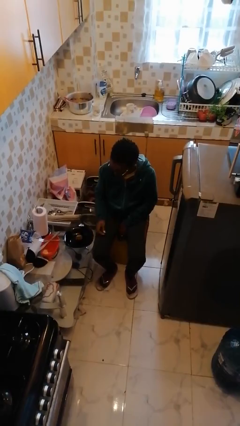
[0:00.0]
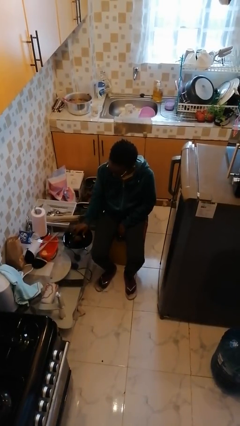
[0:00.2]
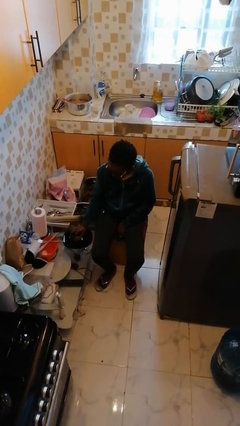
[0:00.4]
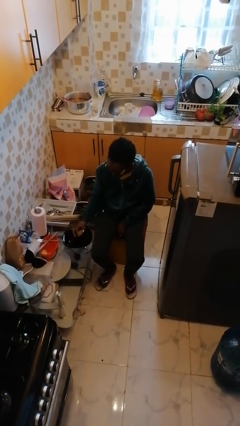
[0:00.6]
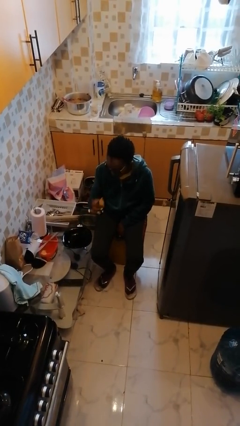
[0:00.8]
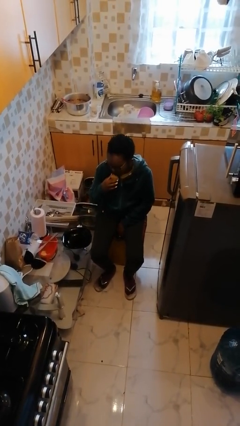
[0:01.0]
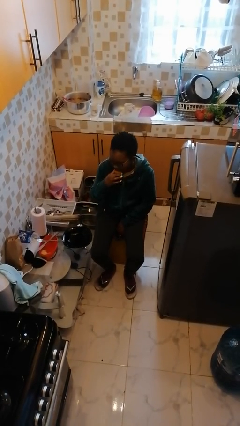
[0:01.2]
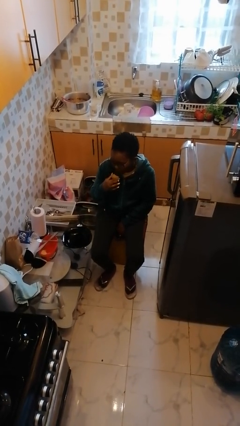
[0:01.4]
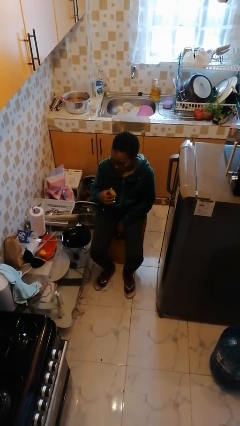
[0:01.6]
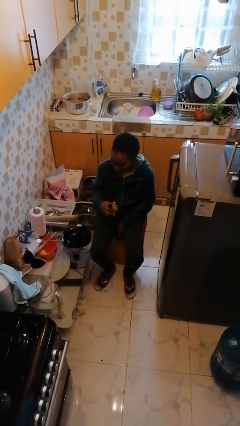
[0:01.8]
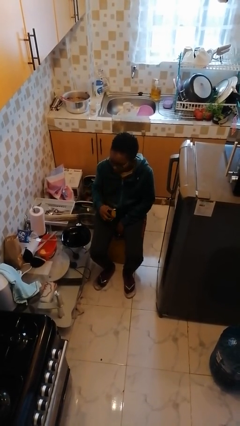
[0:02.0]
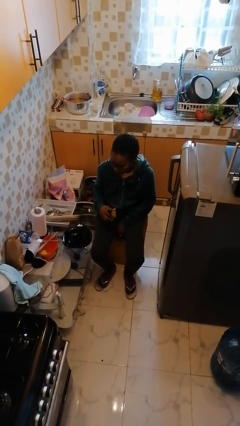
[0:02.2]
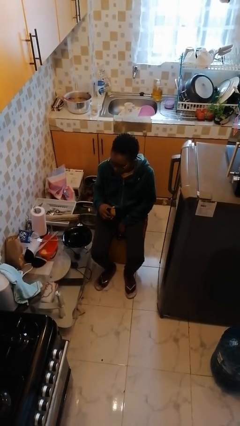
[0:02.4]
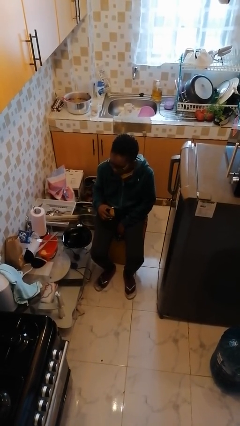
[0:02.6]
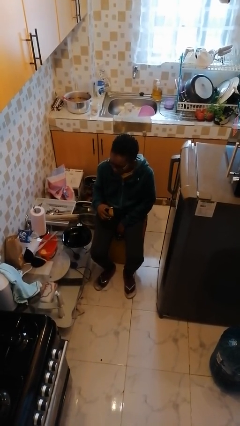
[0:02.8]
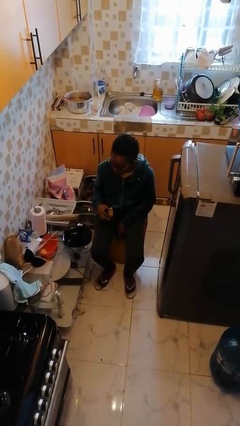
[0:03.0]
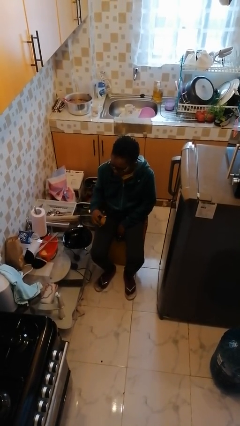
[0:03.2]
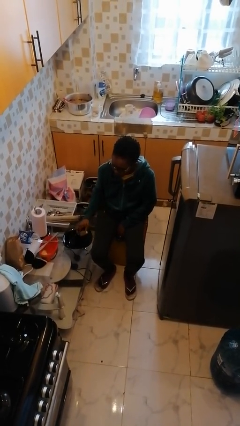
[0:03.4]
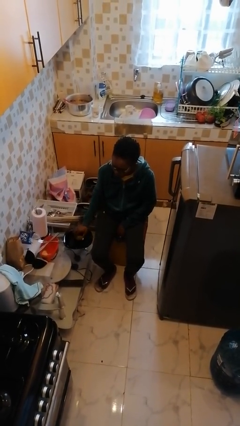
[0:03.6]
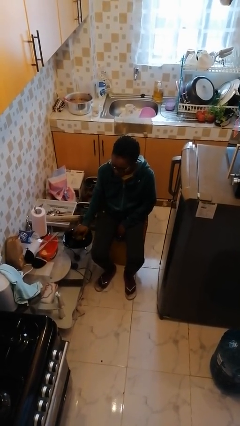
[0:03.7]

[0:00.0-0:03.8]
person eats with hands

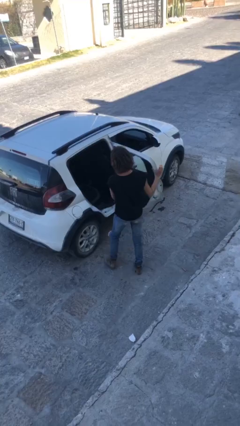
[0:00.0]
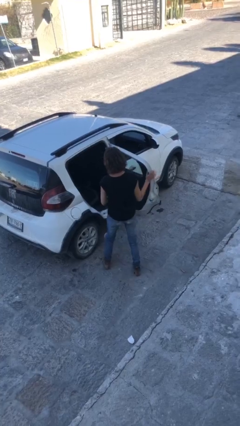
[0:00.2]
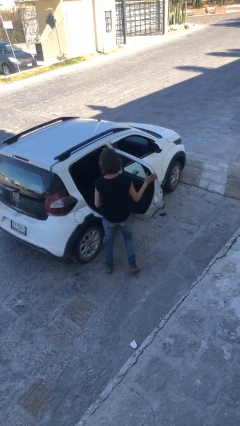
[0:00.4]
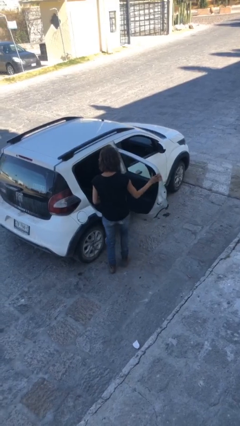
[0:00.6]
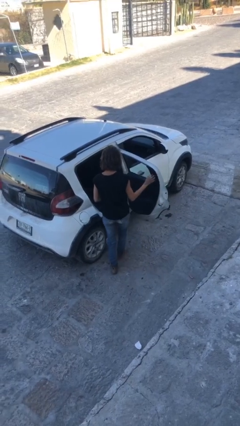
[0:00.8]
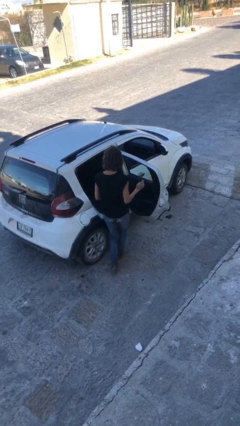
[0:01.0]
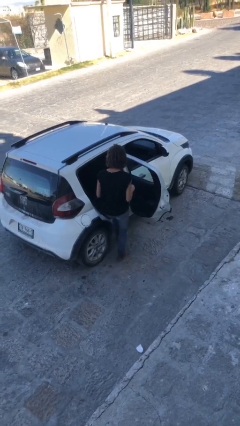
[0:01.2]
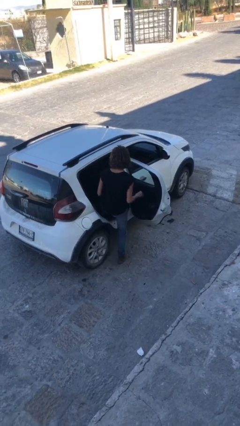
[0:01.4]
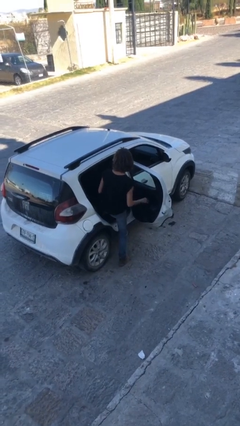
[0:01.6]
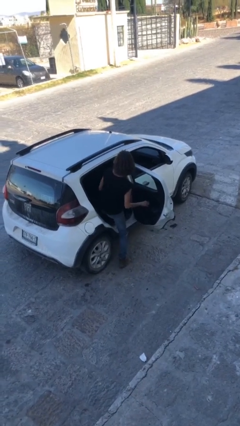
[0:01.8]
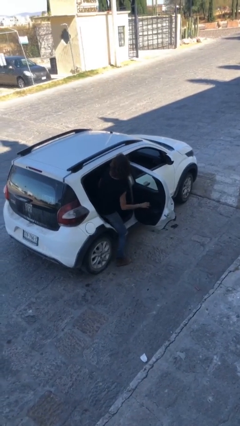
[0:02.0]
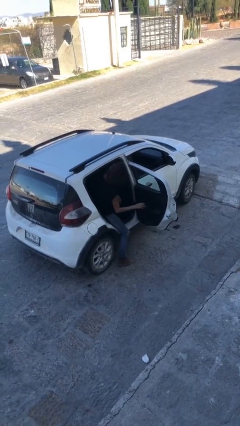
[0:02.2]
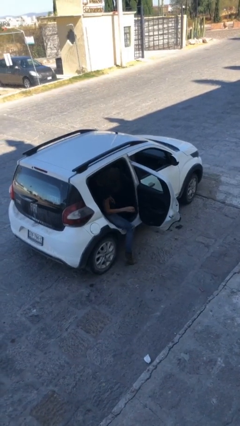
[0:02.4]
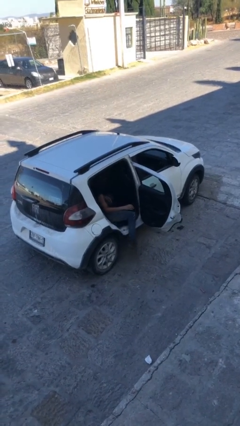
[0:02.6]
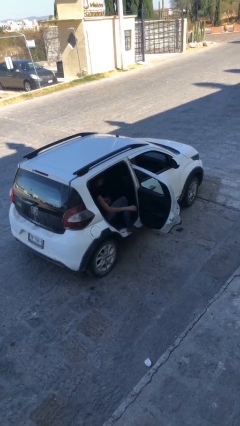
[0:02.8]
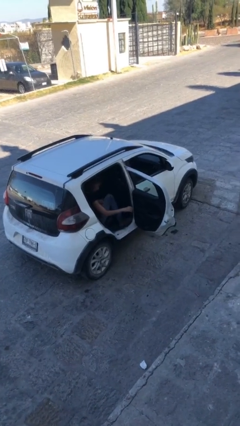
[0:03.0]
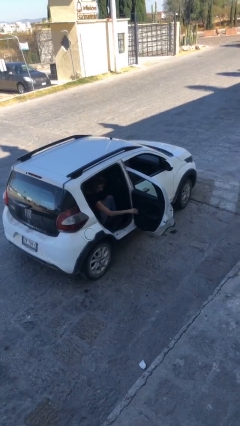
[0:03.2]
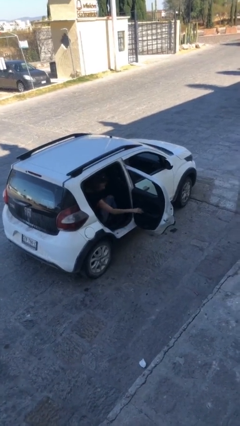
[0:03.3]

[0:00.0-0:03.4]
person enters car

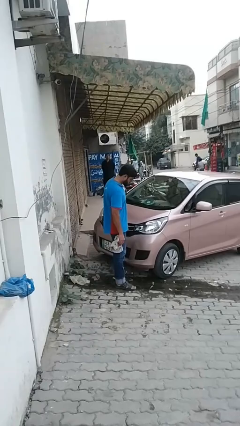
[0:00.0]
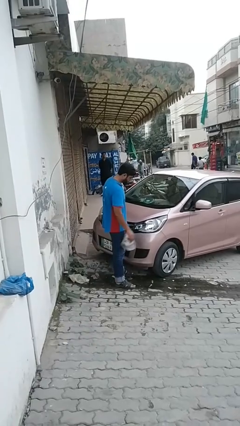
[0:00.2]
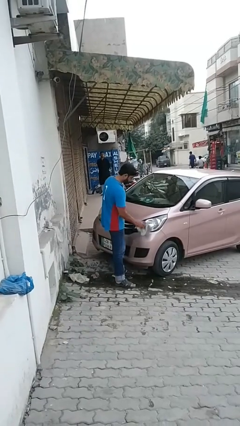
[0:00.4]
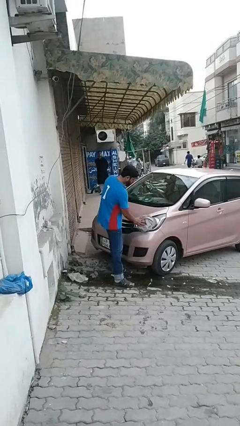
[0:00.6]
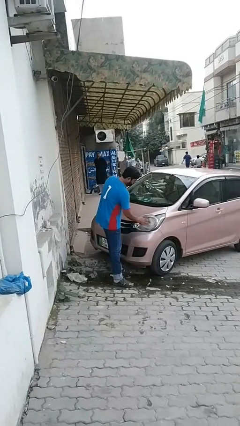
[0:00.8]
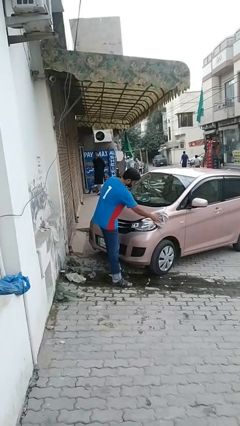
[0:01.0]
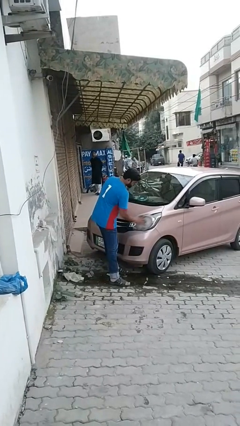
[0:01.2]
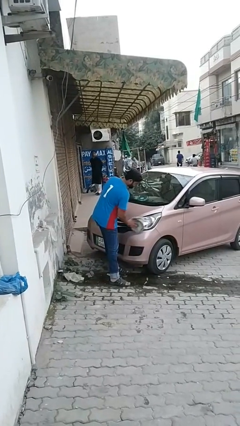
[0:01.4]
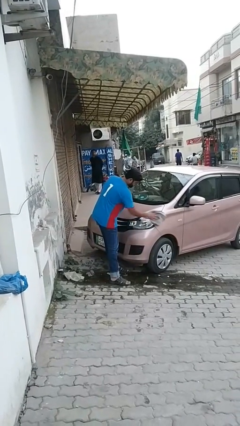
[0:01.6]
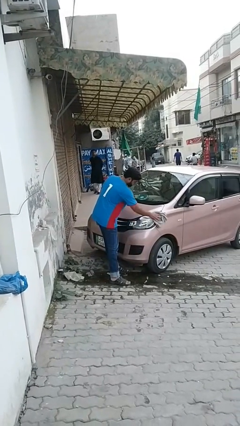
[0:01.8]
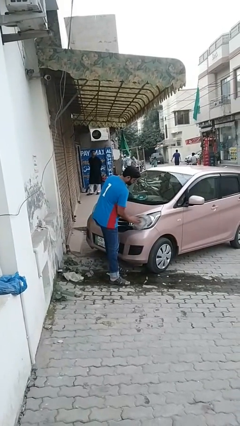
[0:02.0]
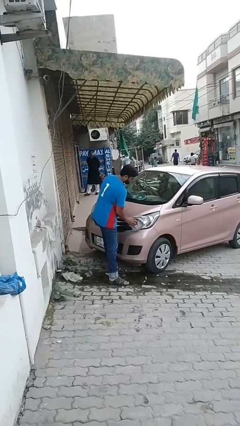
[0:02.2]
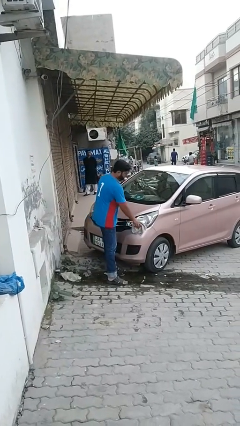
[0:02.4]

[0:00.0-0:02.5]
person polishes car with rag

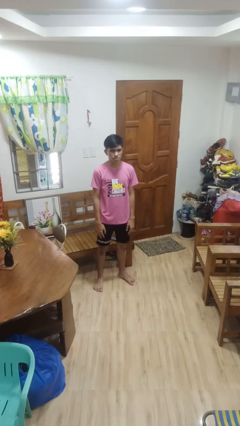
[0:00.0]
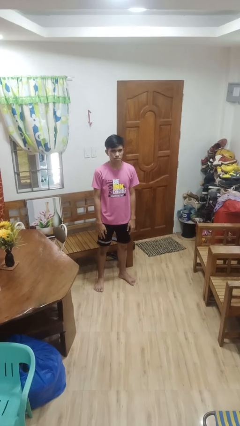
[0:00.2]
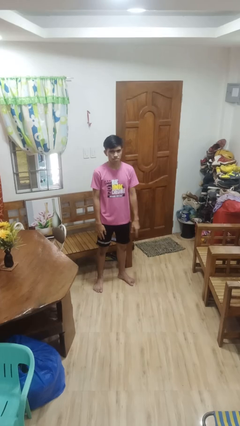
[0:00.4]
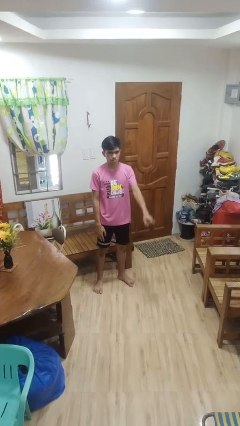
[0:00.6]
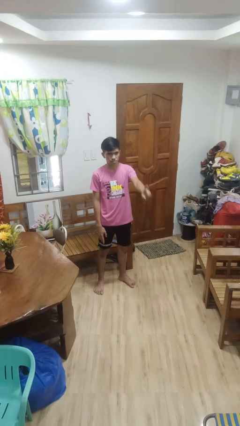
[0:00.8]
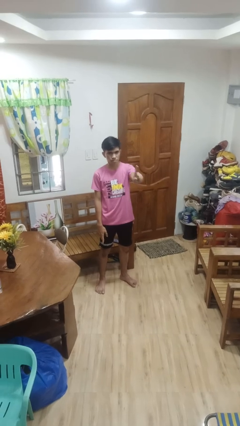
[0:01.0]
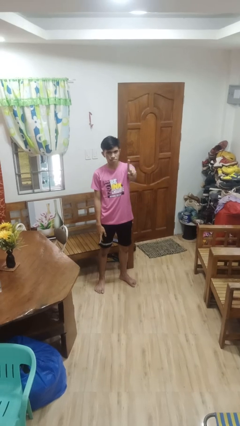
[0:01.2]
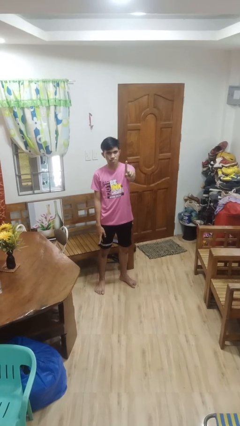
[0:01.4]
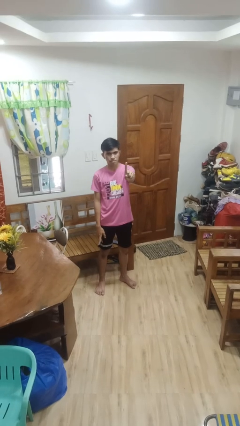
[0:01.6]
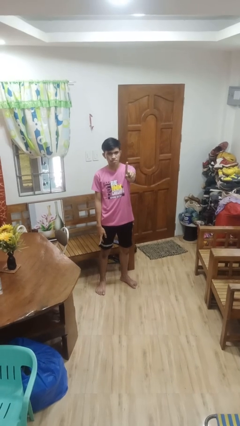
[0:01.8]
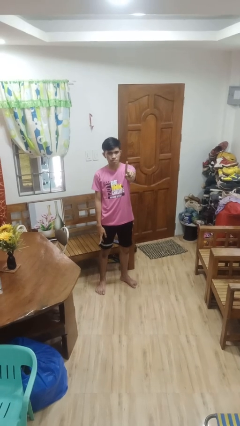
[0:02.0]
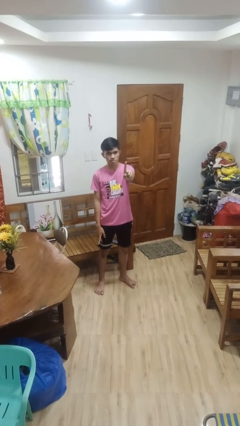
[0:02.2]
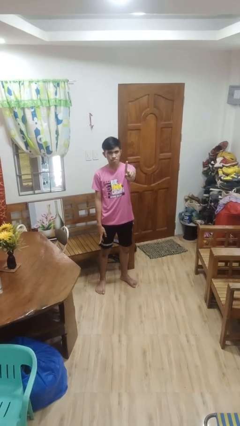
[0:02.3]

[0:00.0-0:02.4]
person gestures number one

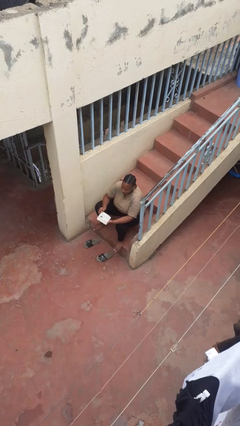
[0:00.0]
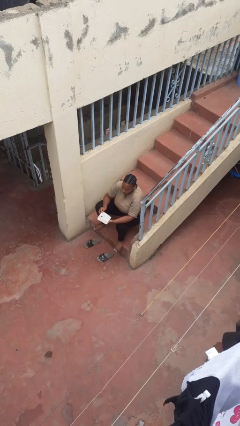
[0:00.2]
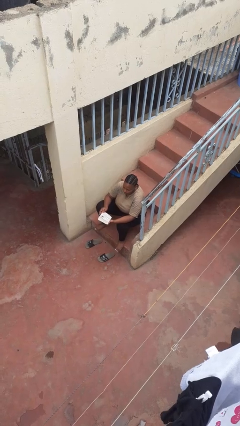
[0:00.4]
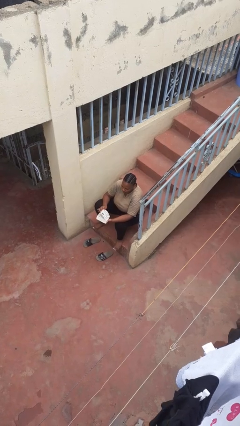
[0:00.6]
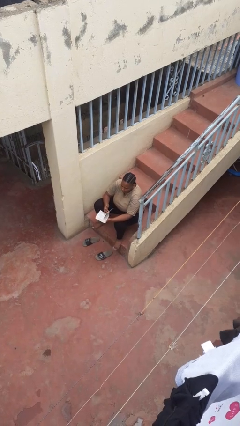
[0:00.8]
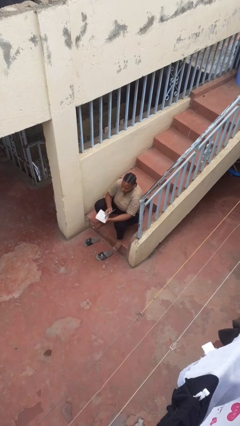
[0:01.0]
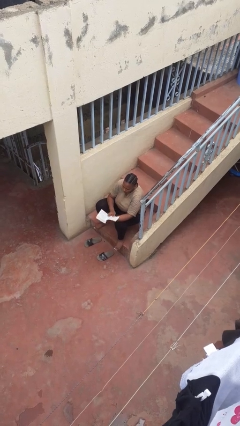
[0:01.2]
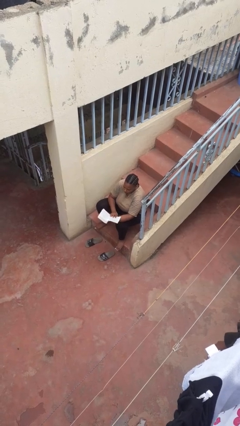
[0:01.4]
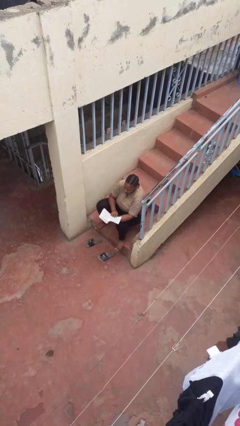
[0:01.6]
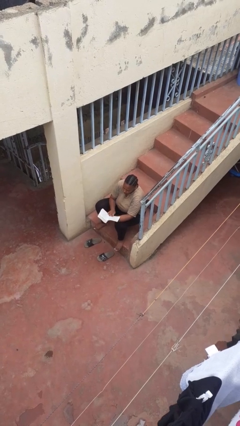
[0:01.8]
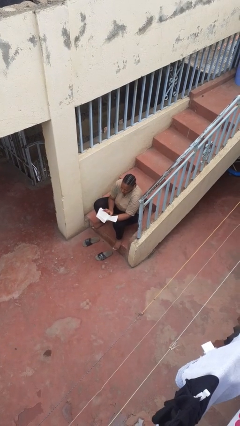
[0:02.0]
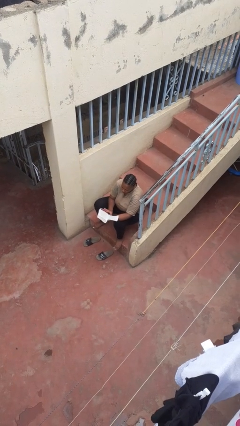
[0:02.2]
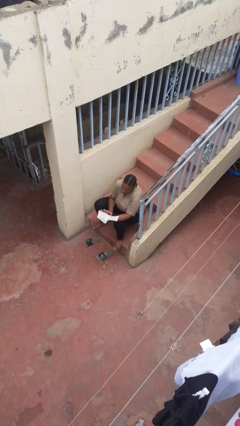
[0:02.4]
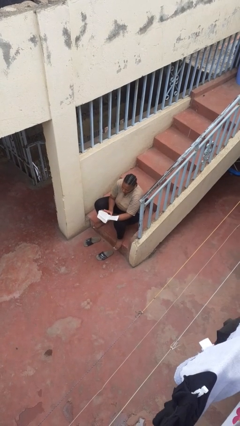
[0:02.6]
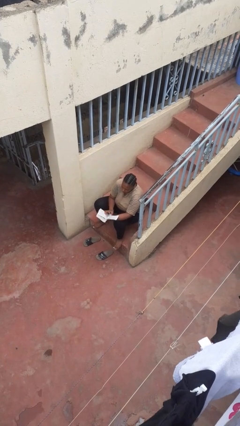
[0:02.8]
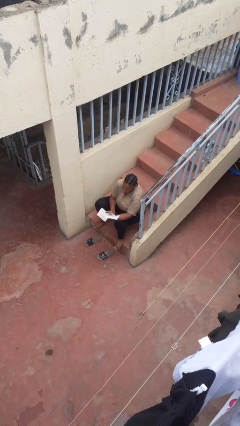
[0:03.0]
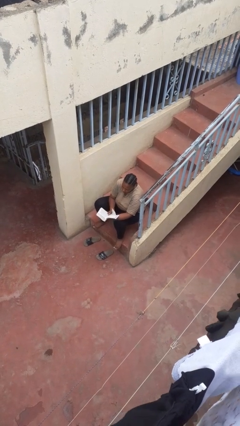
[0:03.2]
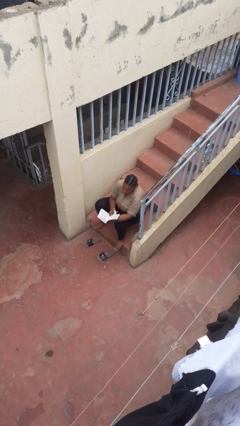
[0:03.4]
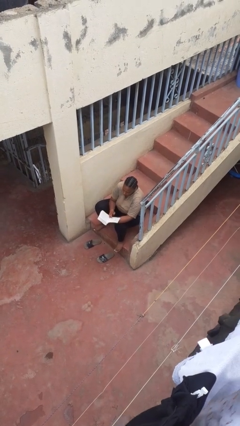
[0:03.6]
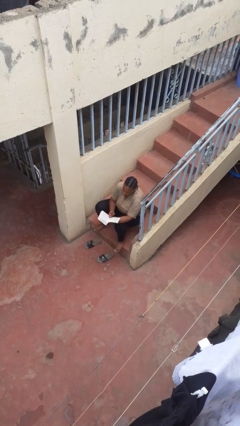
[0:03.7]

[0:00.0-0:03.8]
person reads book

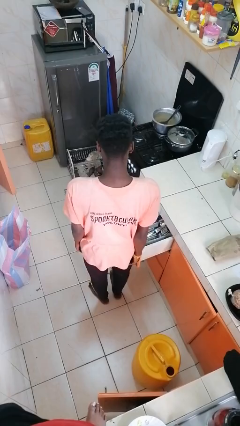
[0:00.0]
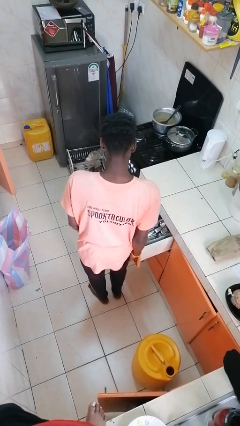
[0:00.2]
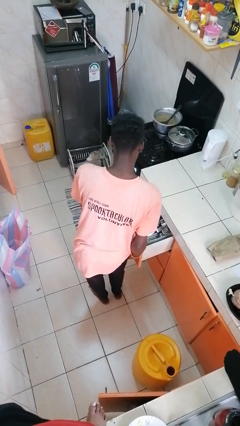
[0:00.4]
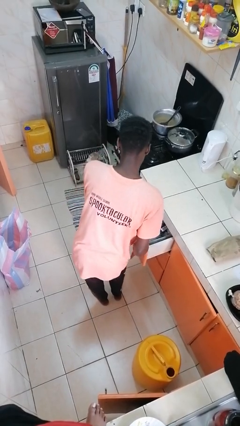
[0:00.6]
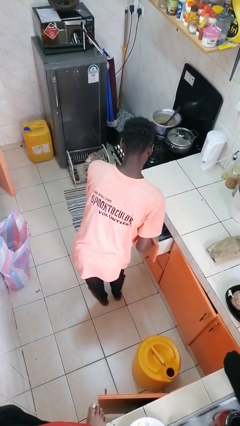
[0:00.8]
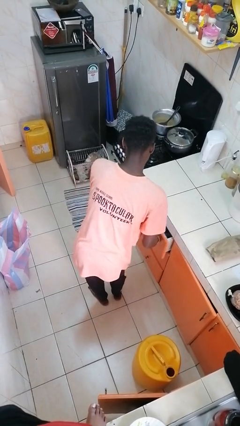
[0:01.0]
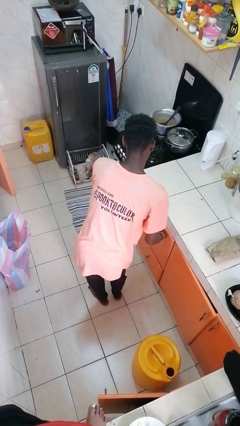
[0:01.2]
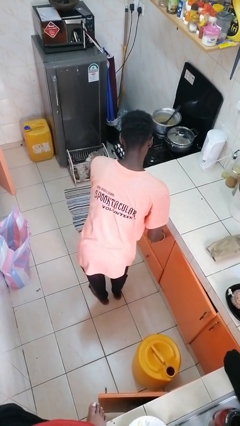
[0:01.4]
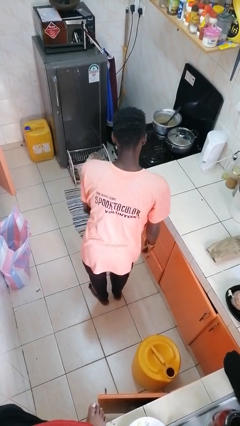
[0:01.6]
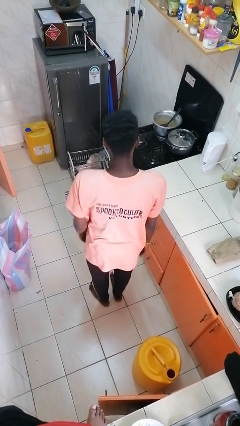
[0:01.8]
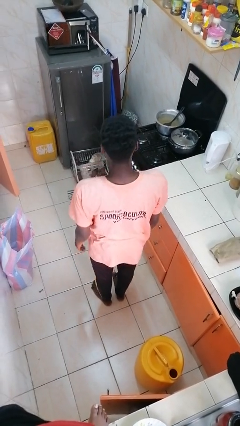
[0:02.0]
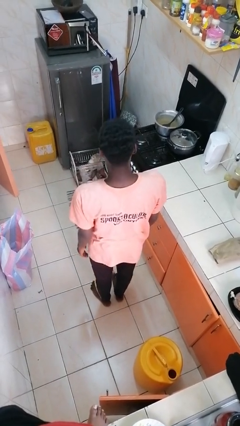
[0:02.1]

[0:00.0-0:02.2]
person closes kitchen drawer
